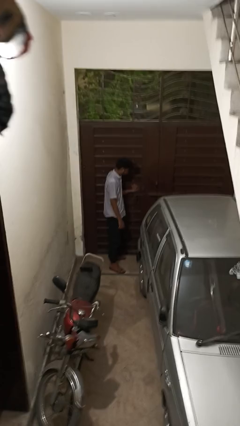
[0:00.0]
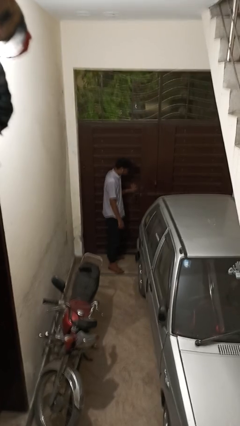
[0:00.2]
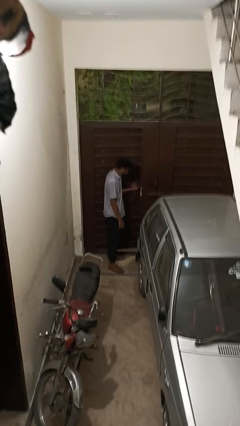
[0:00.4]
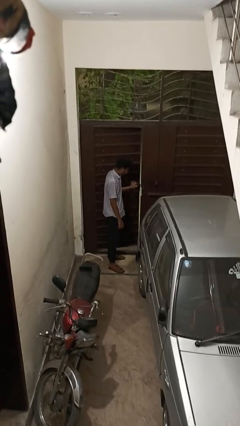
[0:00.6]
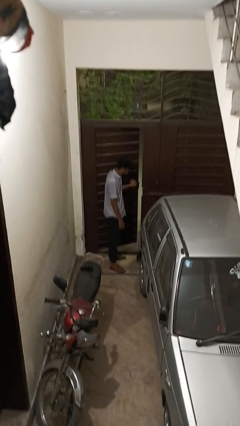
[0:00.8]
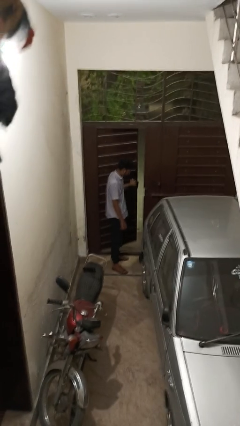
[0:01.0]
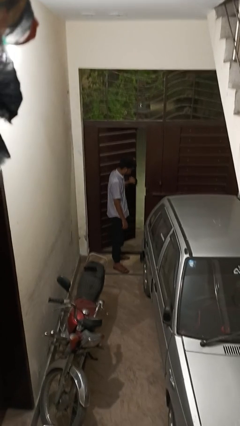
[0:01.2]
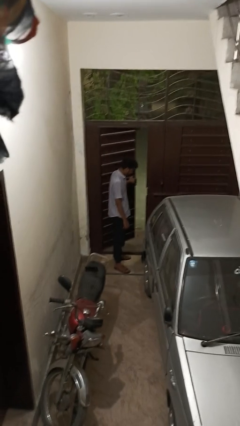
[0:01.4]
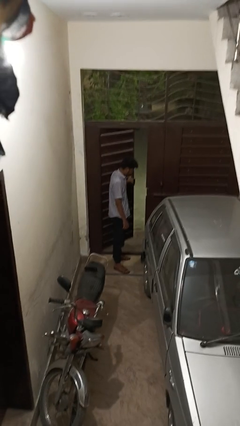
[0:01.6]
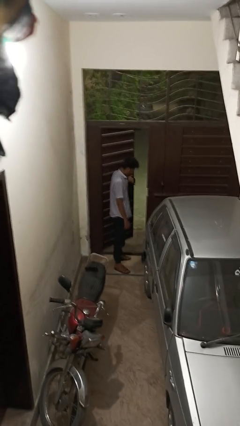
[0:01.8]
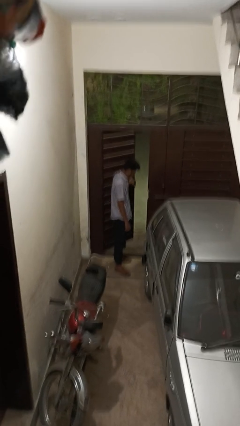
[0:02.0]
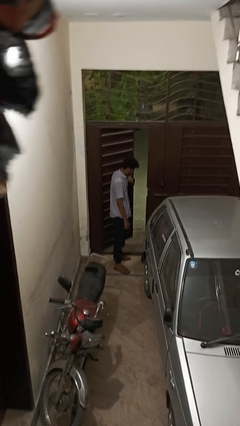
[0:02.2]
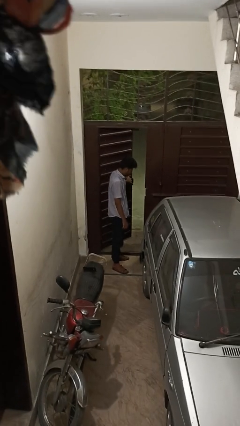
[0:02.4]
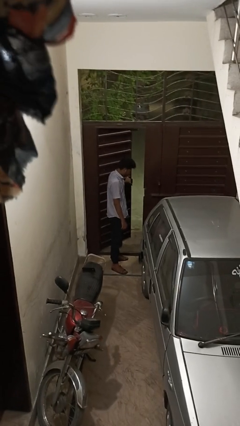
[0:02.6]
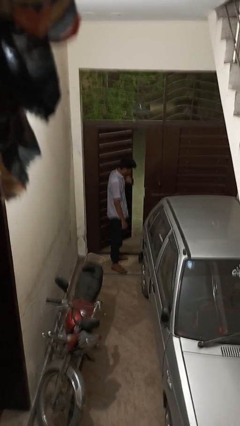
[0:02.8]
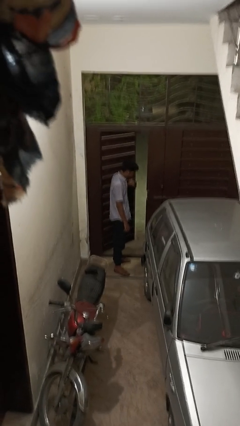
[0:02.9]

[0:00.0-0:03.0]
person opens gate

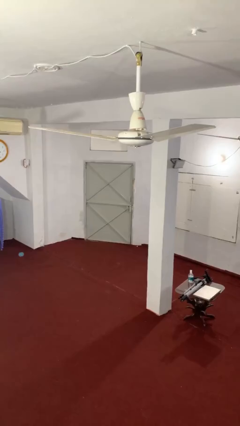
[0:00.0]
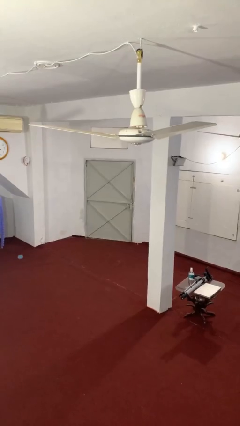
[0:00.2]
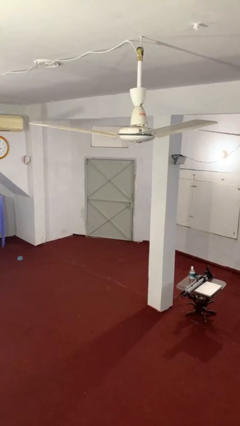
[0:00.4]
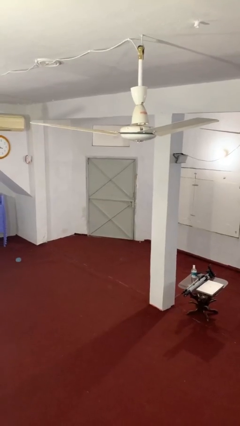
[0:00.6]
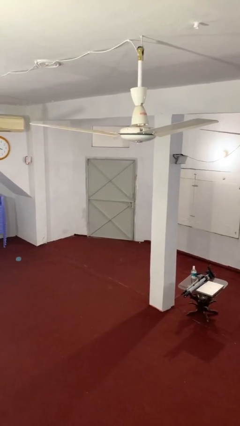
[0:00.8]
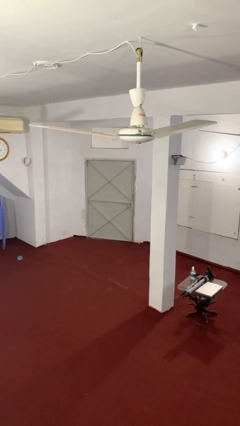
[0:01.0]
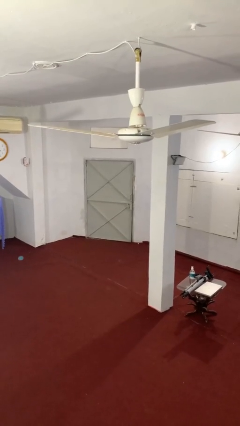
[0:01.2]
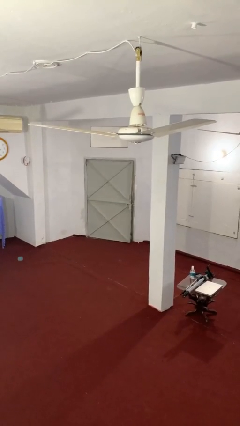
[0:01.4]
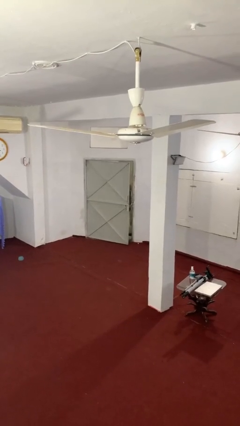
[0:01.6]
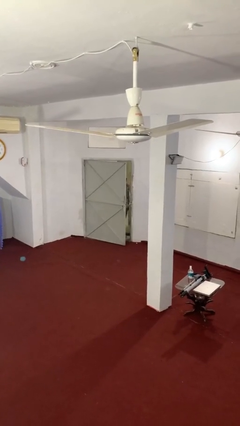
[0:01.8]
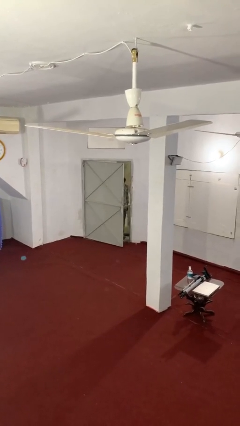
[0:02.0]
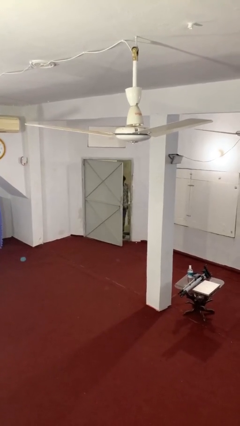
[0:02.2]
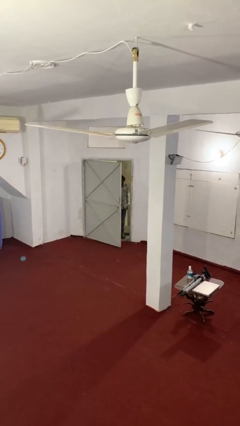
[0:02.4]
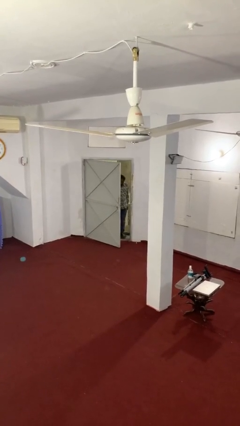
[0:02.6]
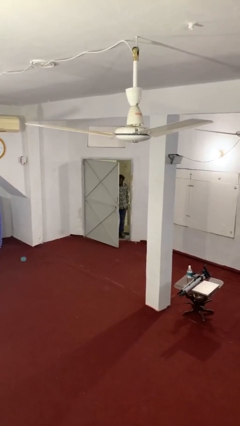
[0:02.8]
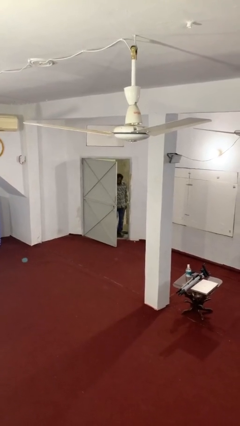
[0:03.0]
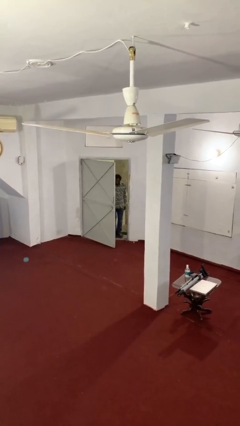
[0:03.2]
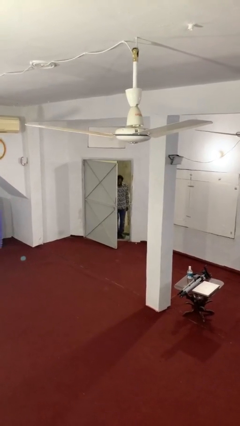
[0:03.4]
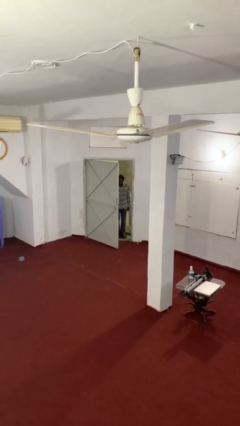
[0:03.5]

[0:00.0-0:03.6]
person opens facility door

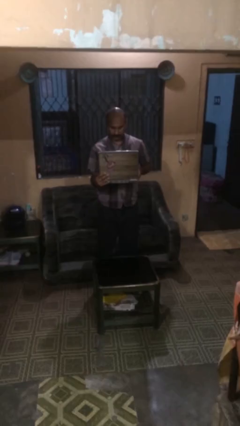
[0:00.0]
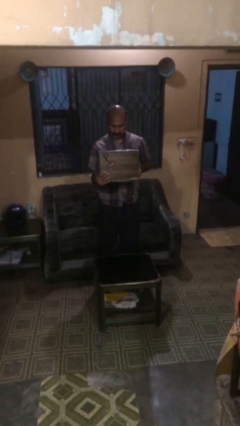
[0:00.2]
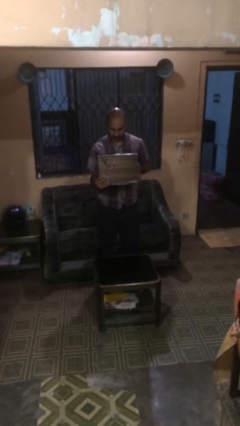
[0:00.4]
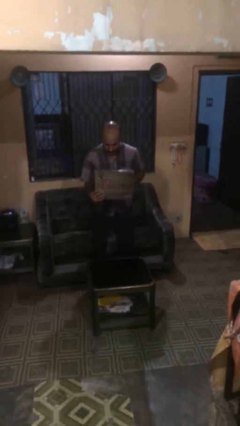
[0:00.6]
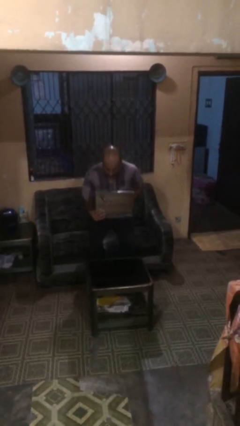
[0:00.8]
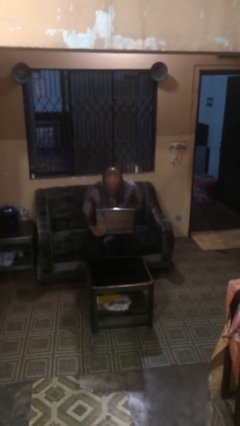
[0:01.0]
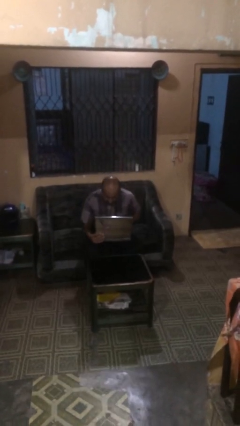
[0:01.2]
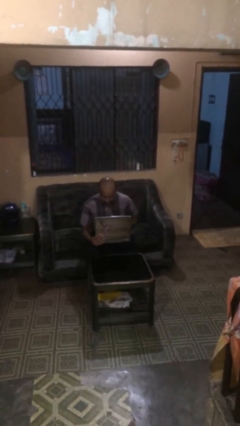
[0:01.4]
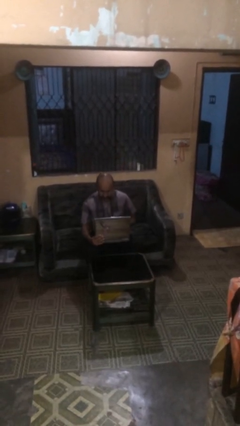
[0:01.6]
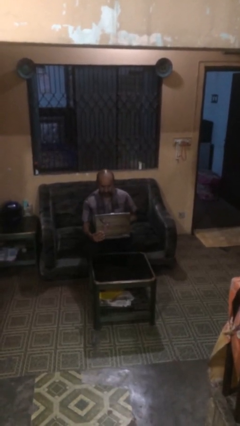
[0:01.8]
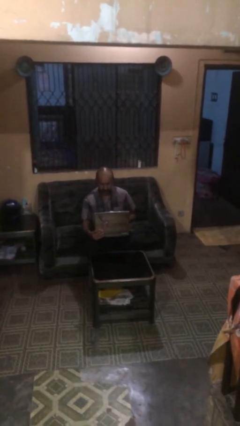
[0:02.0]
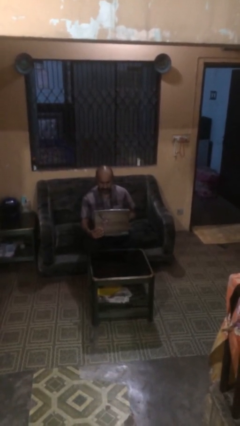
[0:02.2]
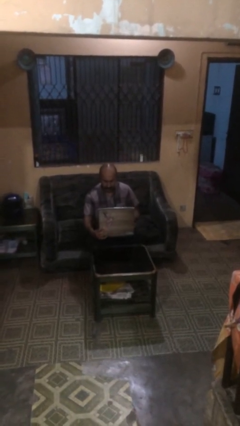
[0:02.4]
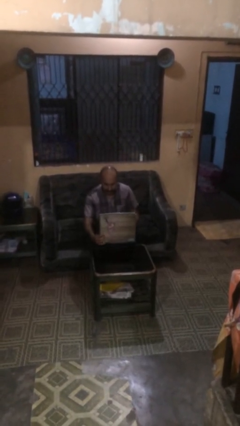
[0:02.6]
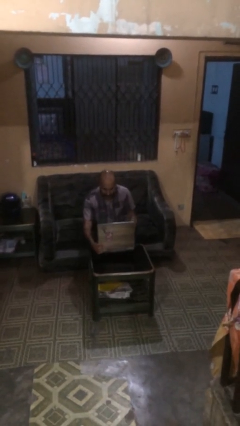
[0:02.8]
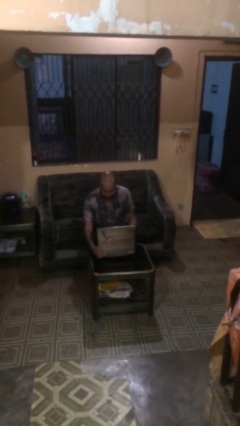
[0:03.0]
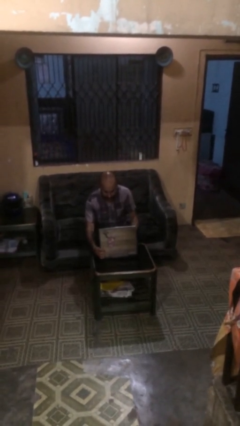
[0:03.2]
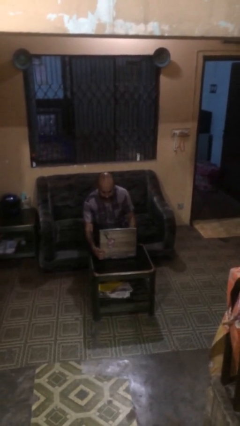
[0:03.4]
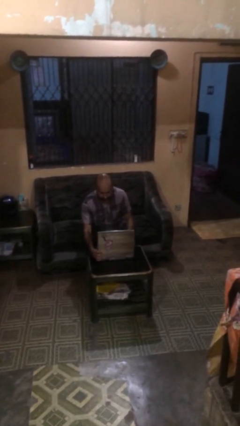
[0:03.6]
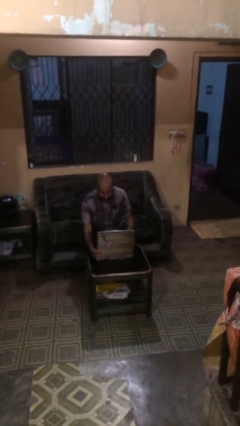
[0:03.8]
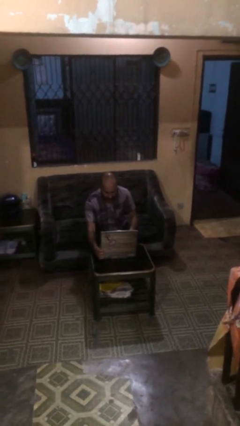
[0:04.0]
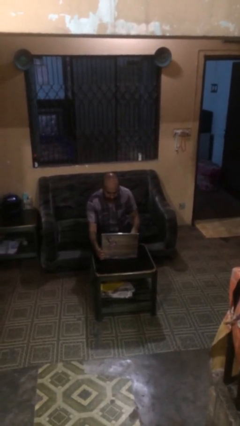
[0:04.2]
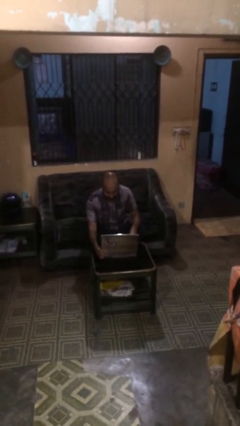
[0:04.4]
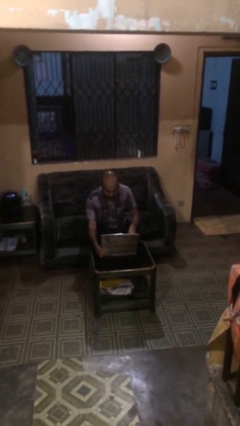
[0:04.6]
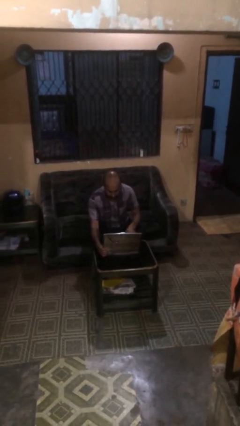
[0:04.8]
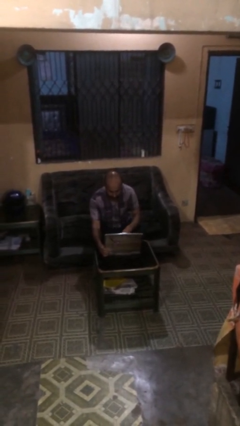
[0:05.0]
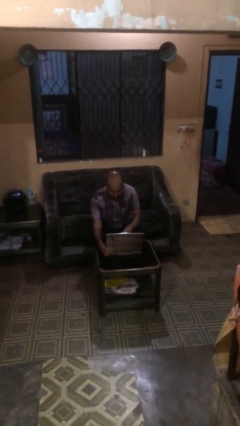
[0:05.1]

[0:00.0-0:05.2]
person sits down

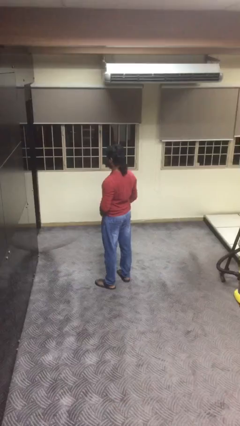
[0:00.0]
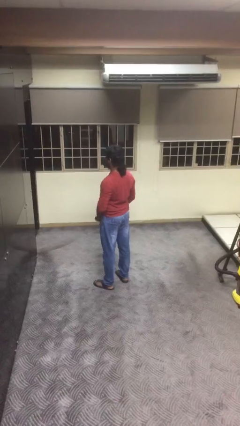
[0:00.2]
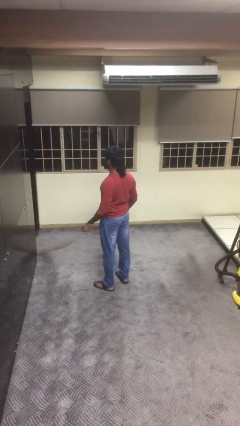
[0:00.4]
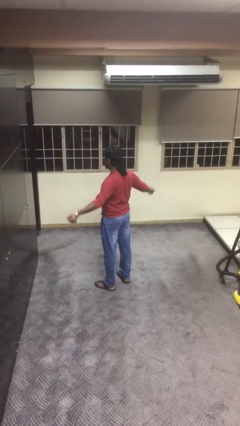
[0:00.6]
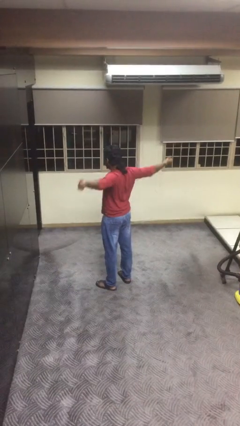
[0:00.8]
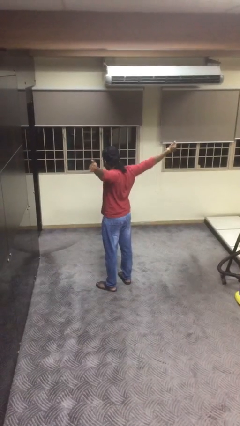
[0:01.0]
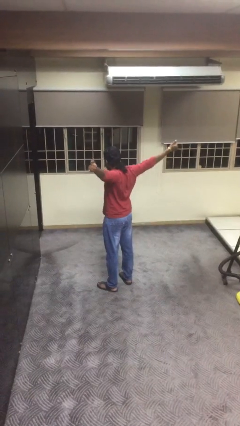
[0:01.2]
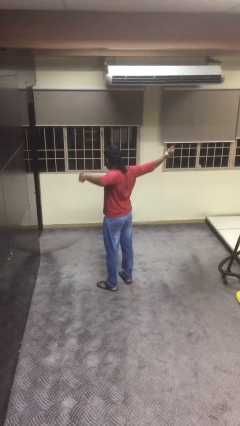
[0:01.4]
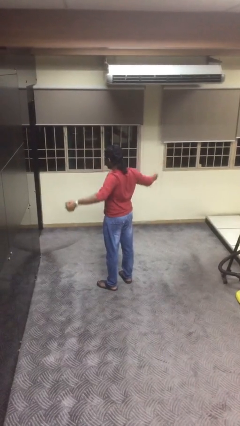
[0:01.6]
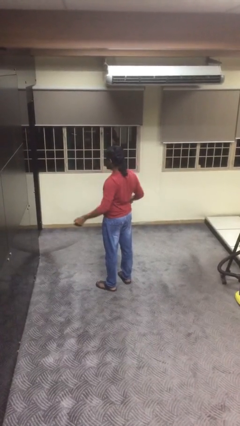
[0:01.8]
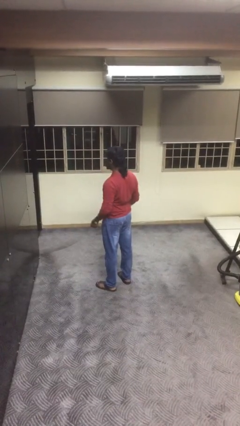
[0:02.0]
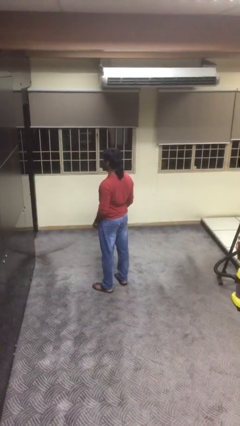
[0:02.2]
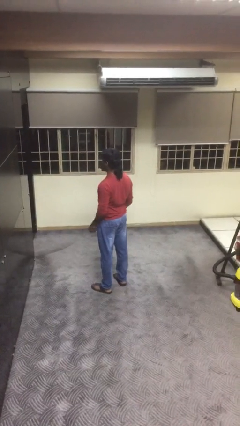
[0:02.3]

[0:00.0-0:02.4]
person stretches arms to side

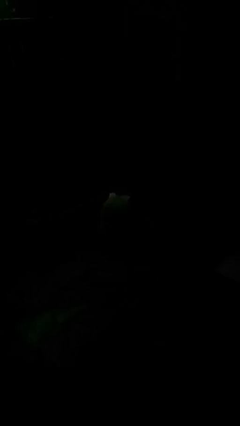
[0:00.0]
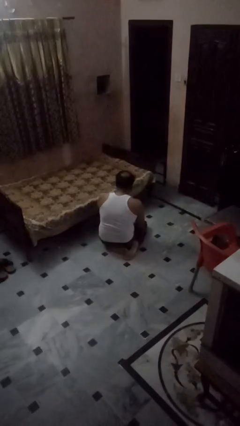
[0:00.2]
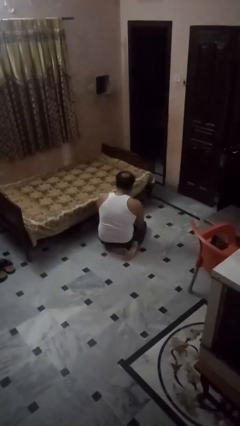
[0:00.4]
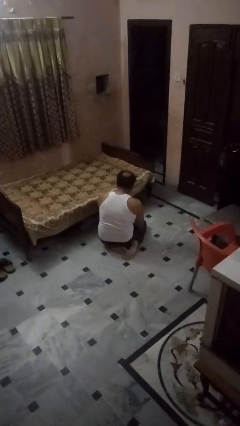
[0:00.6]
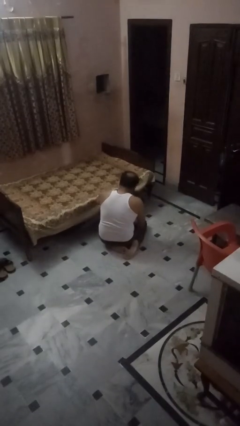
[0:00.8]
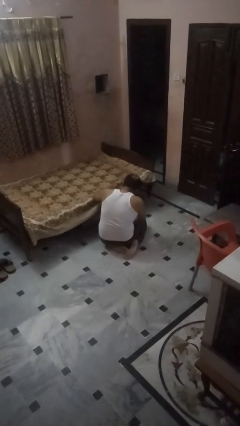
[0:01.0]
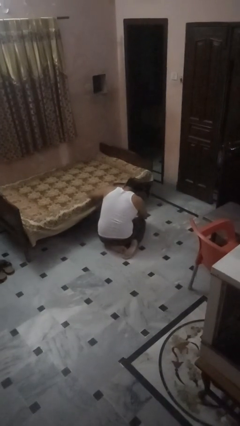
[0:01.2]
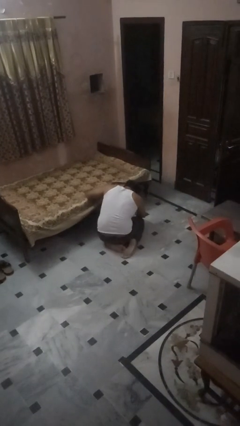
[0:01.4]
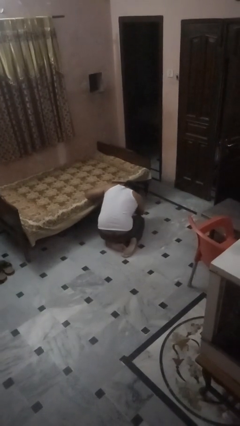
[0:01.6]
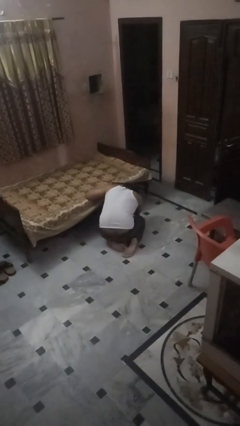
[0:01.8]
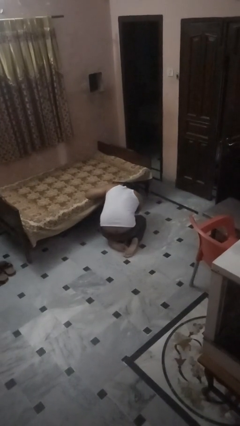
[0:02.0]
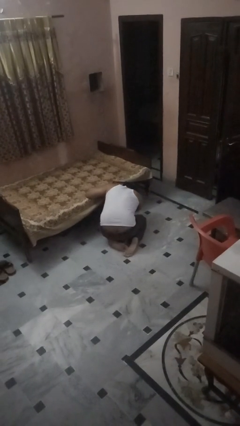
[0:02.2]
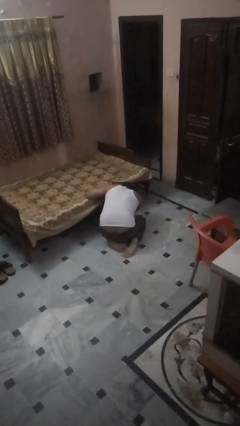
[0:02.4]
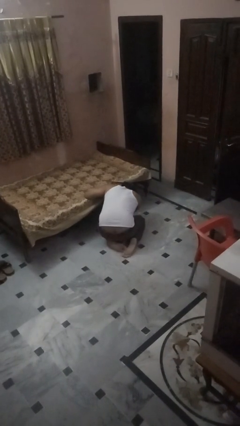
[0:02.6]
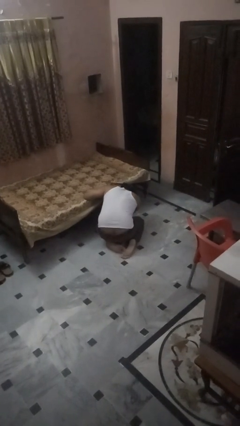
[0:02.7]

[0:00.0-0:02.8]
person searches under bed
